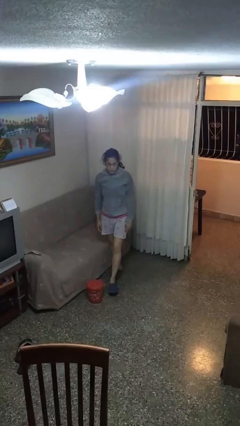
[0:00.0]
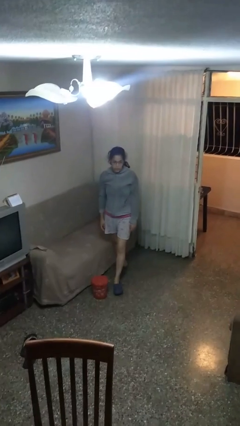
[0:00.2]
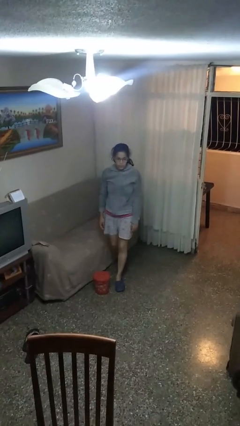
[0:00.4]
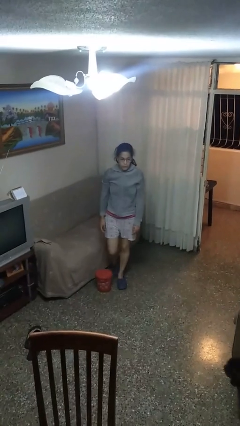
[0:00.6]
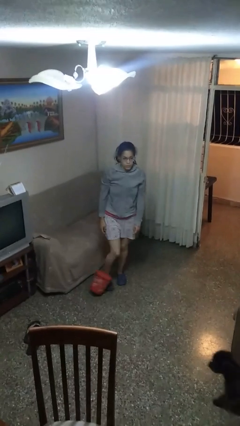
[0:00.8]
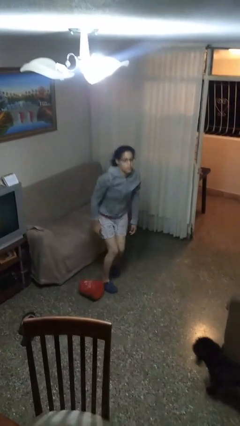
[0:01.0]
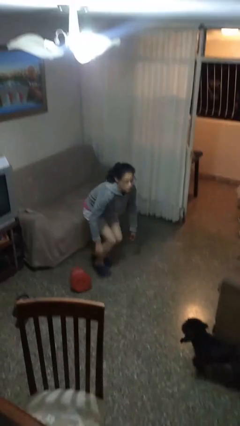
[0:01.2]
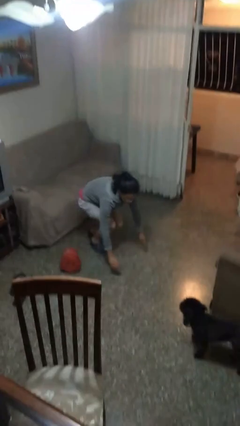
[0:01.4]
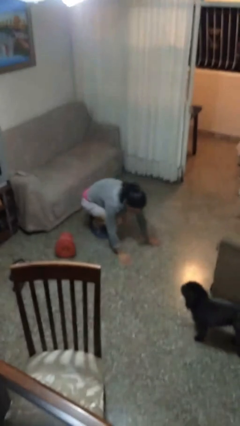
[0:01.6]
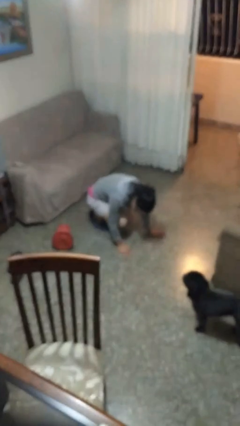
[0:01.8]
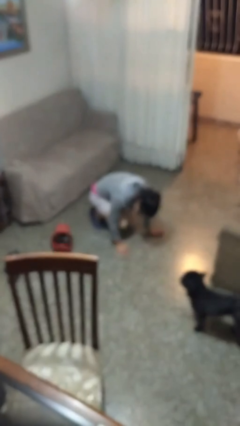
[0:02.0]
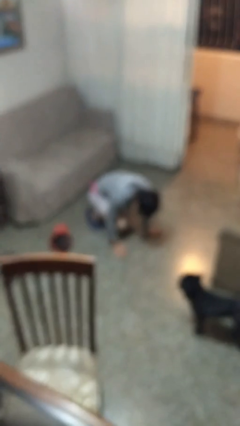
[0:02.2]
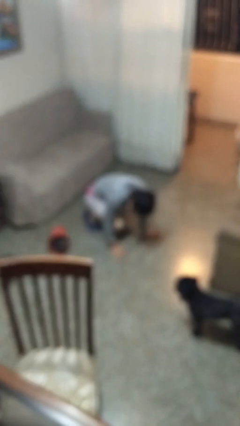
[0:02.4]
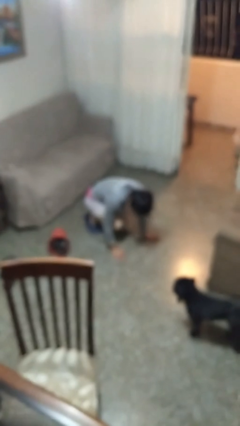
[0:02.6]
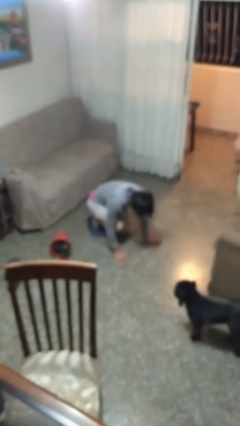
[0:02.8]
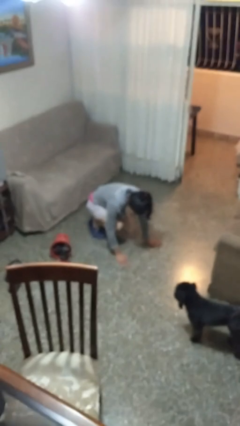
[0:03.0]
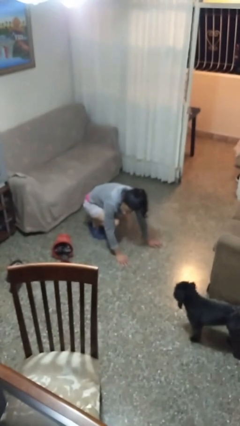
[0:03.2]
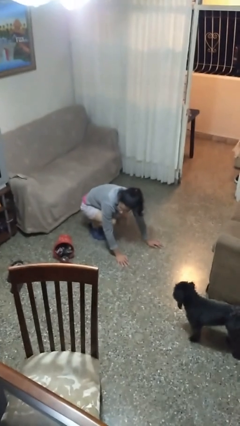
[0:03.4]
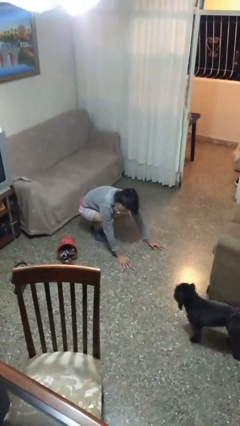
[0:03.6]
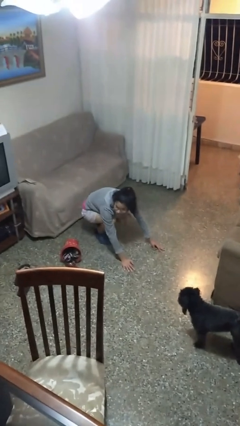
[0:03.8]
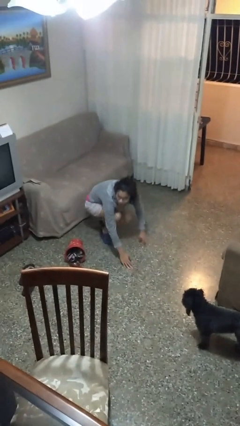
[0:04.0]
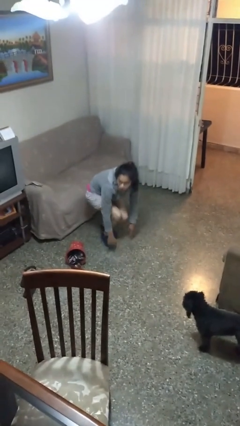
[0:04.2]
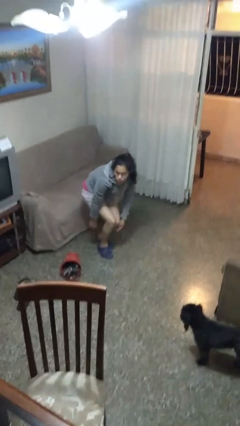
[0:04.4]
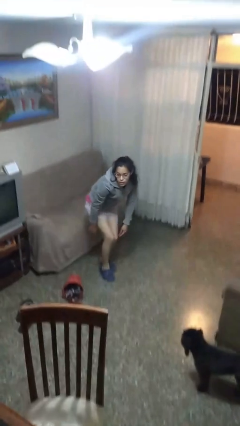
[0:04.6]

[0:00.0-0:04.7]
person trips on object on floor

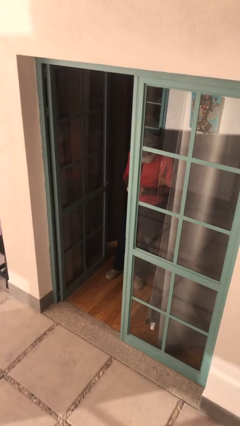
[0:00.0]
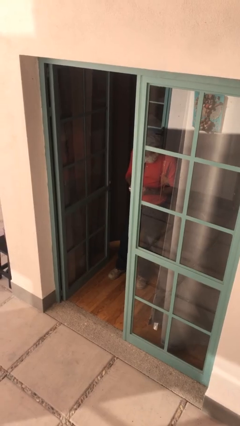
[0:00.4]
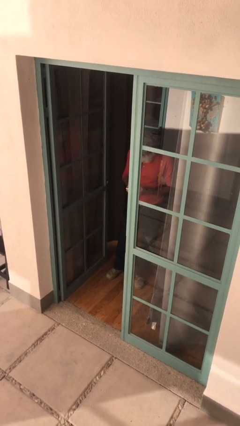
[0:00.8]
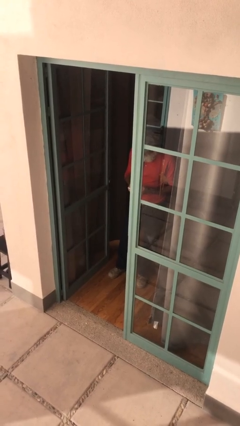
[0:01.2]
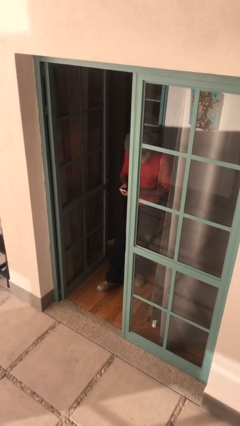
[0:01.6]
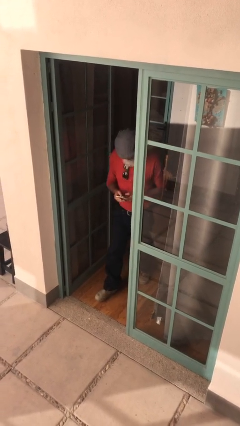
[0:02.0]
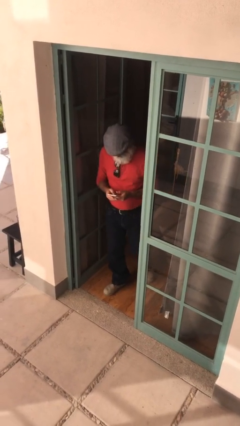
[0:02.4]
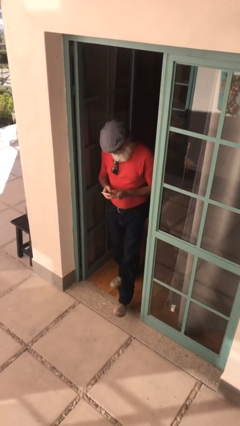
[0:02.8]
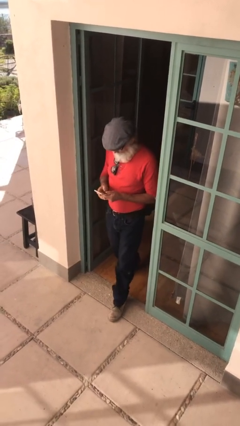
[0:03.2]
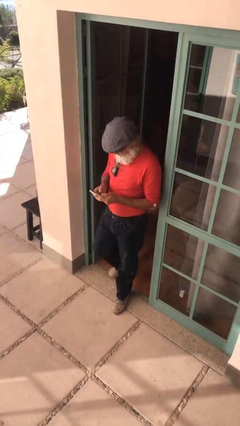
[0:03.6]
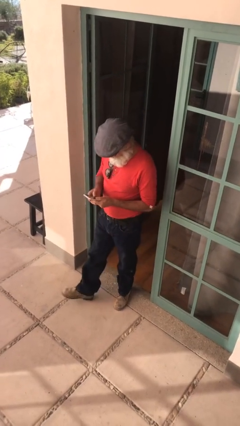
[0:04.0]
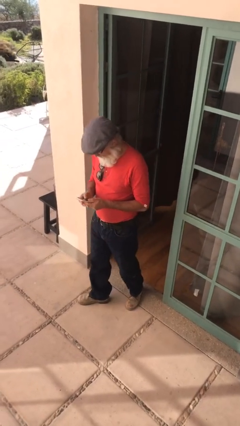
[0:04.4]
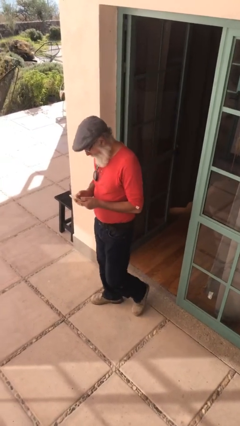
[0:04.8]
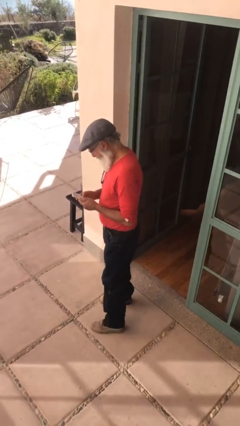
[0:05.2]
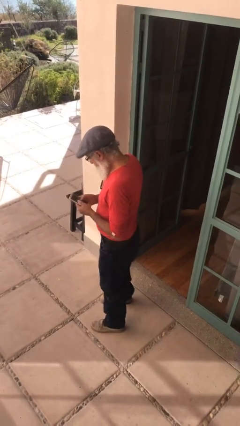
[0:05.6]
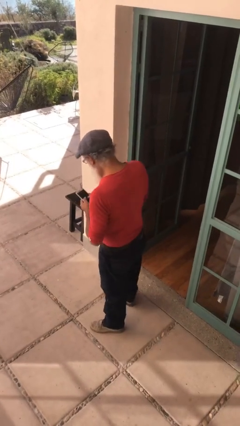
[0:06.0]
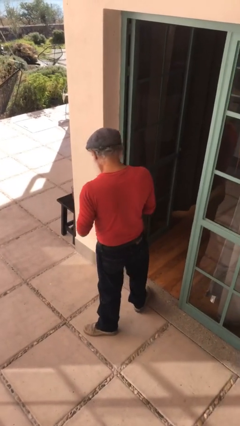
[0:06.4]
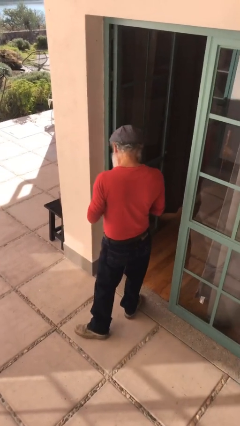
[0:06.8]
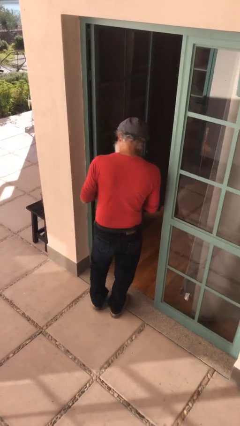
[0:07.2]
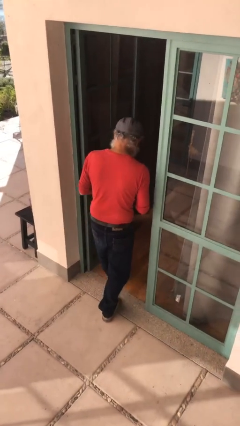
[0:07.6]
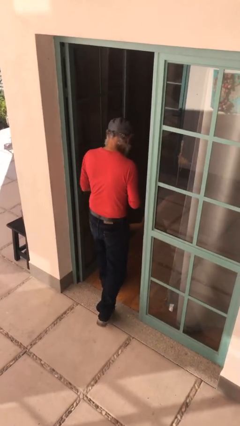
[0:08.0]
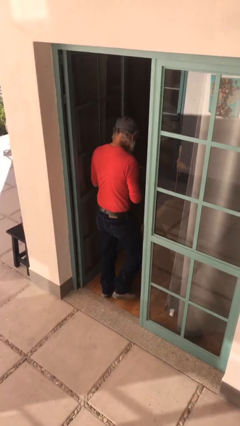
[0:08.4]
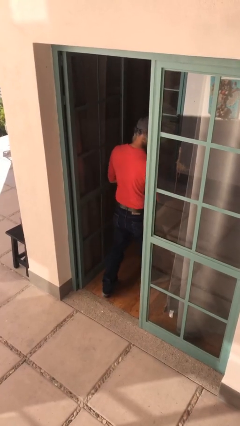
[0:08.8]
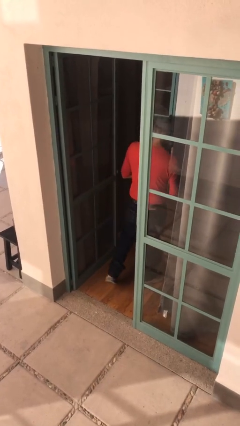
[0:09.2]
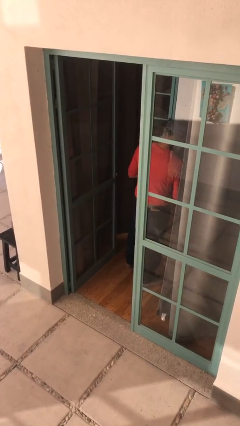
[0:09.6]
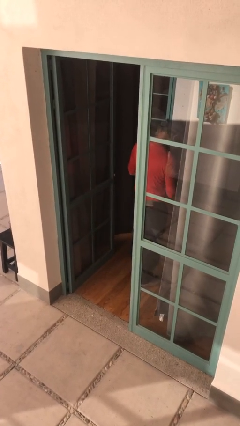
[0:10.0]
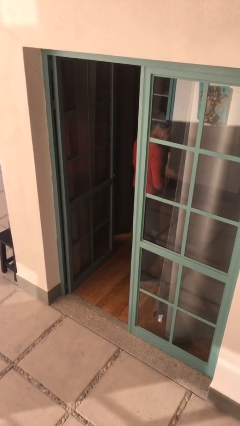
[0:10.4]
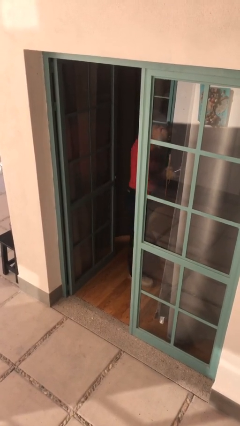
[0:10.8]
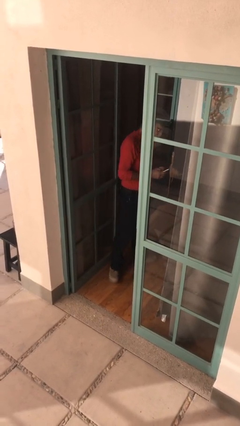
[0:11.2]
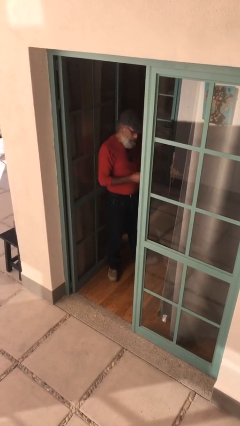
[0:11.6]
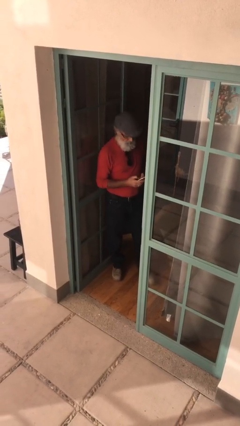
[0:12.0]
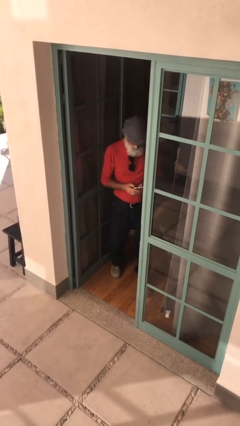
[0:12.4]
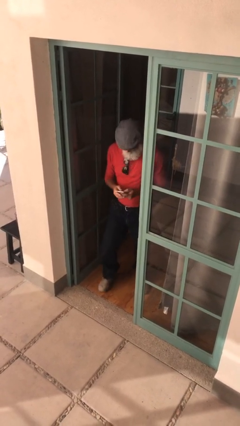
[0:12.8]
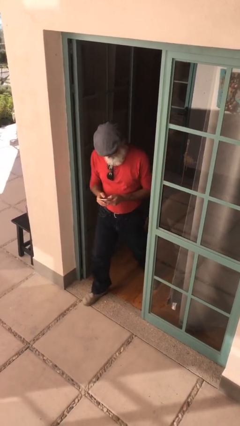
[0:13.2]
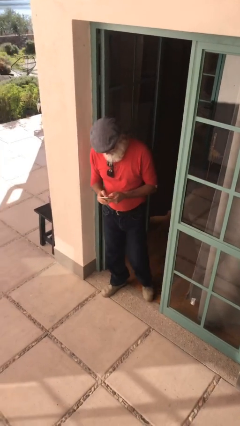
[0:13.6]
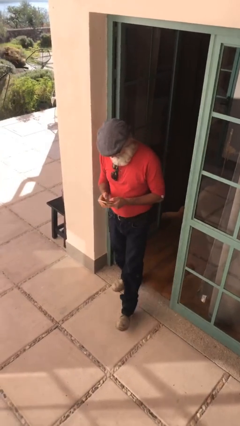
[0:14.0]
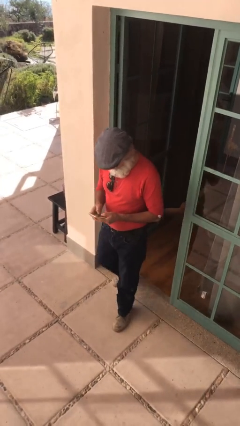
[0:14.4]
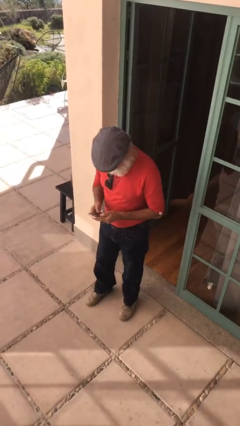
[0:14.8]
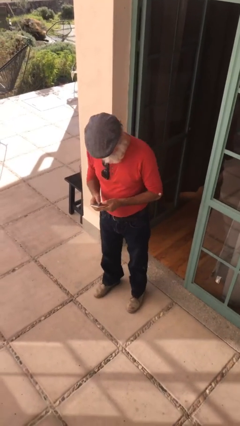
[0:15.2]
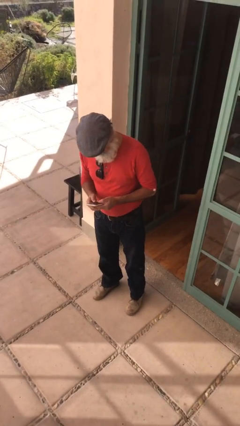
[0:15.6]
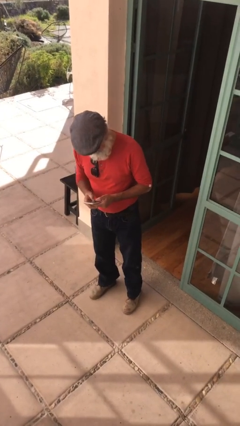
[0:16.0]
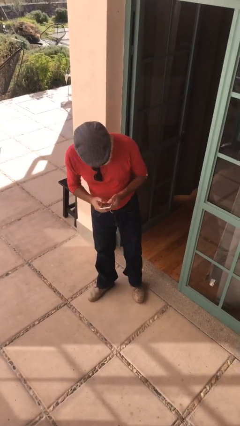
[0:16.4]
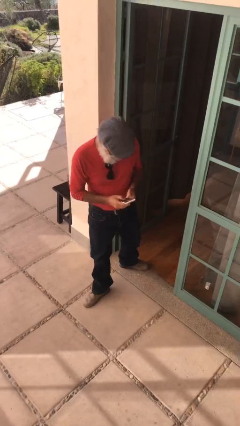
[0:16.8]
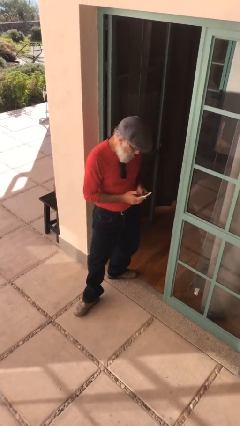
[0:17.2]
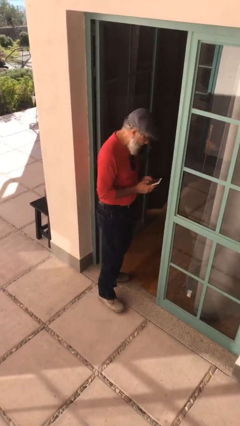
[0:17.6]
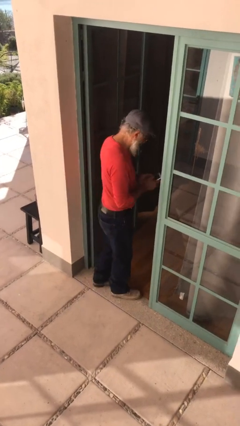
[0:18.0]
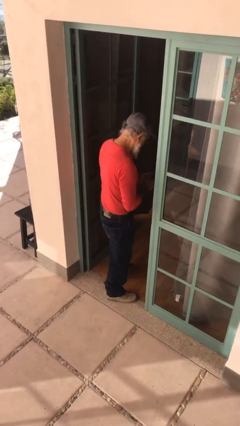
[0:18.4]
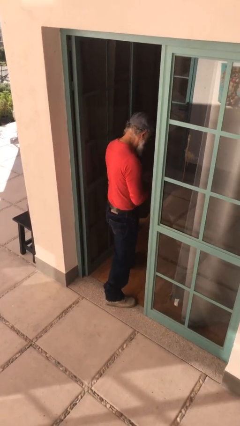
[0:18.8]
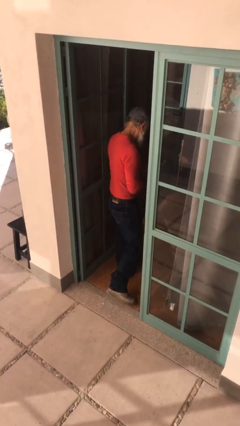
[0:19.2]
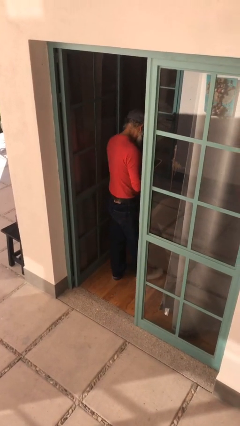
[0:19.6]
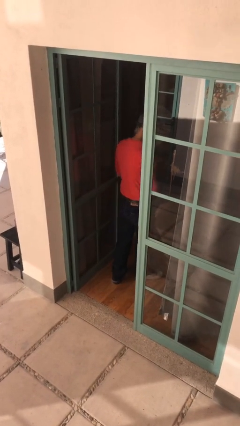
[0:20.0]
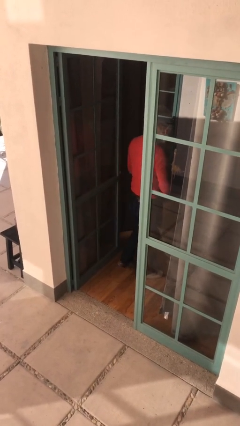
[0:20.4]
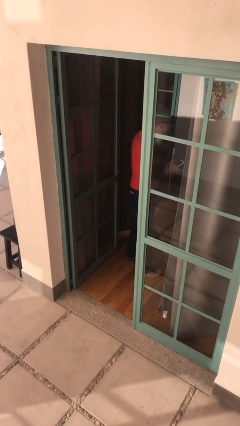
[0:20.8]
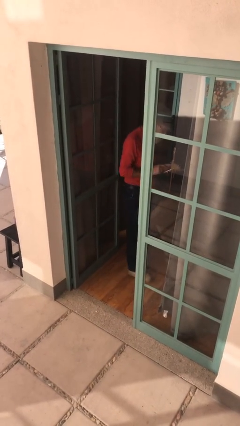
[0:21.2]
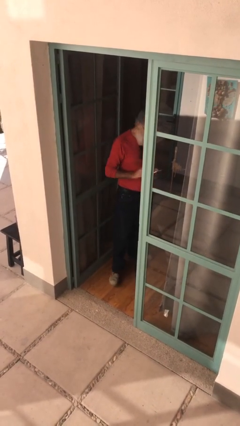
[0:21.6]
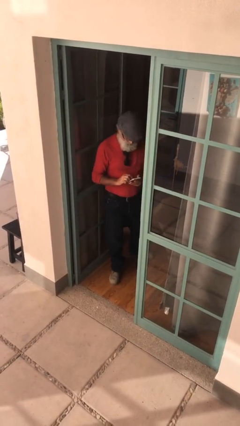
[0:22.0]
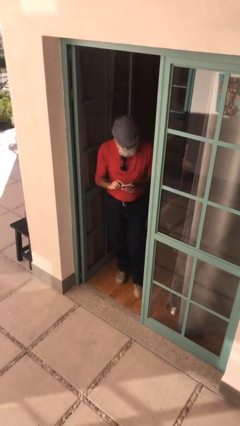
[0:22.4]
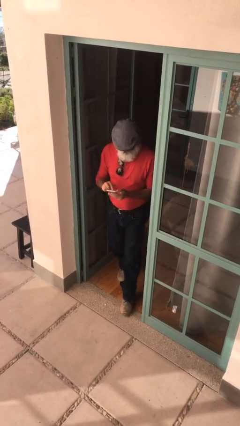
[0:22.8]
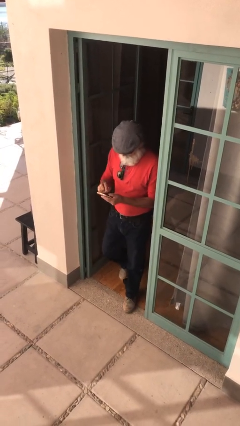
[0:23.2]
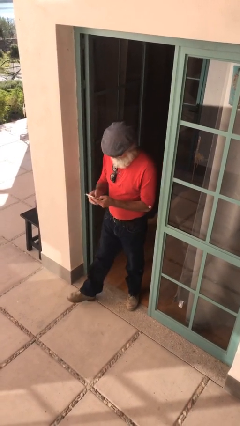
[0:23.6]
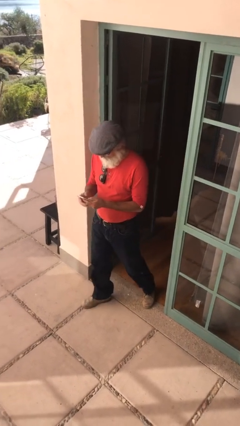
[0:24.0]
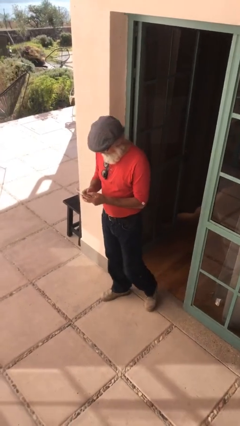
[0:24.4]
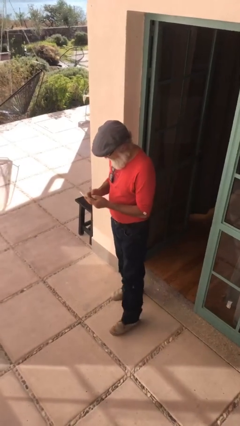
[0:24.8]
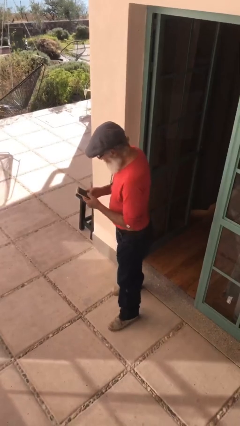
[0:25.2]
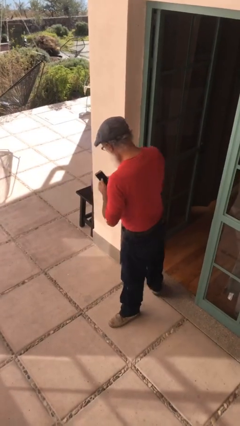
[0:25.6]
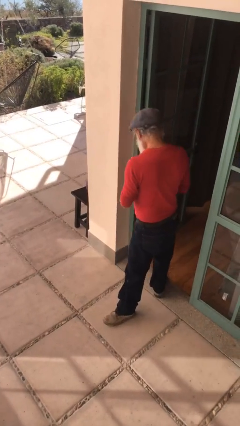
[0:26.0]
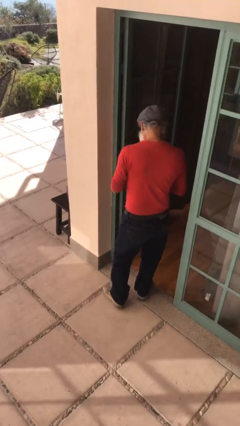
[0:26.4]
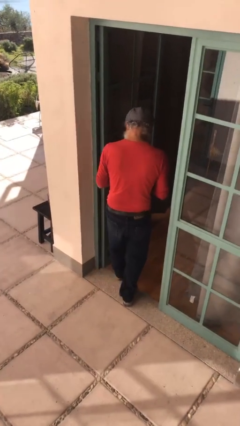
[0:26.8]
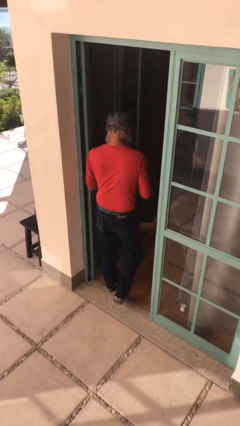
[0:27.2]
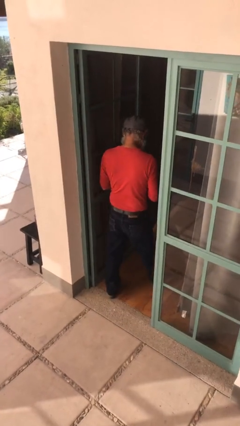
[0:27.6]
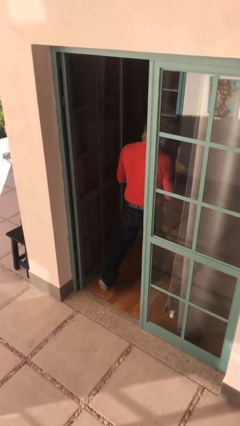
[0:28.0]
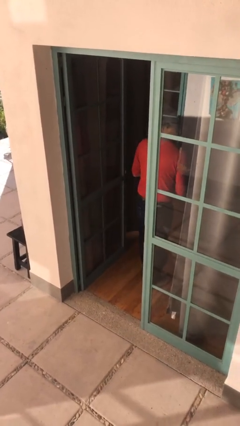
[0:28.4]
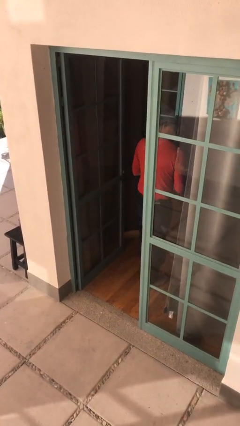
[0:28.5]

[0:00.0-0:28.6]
person texts on phone
